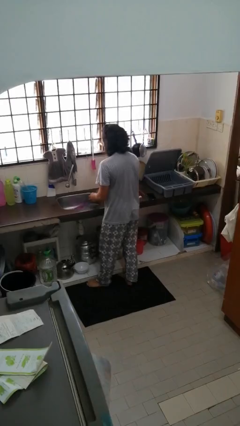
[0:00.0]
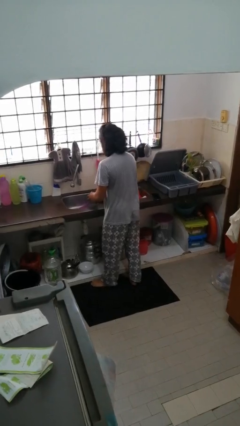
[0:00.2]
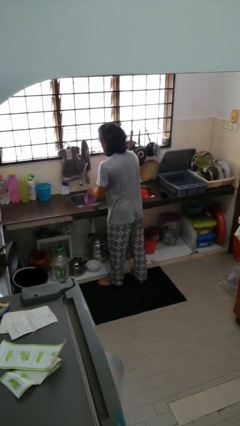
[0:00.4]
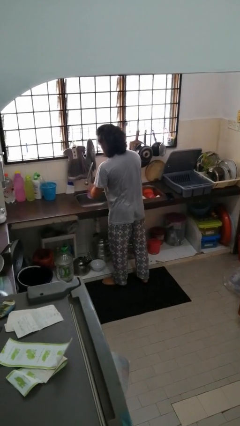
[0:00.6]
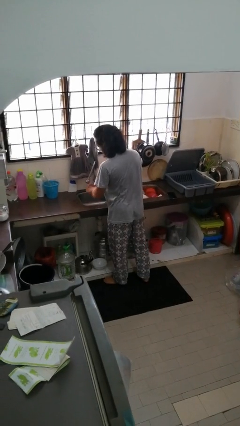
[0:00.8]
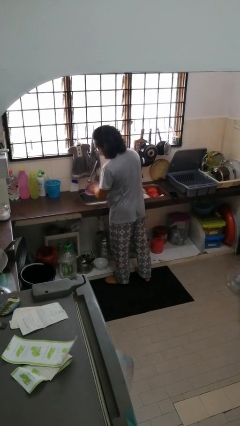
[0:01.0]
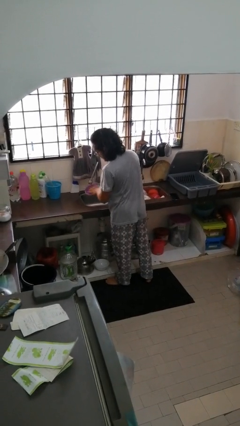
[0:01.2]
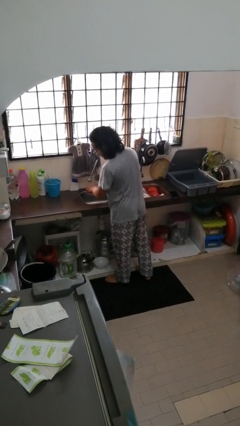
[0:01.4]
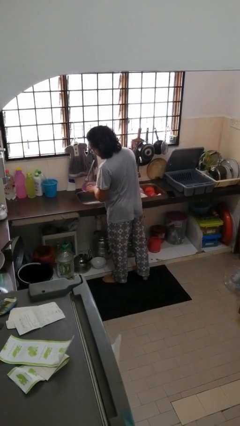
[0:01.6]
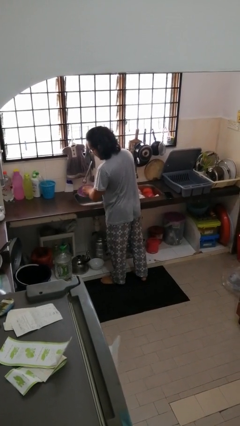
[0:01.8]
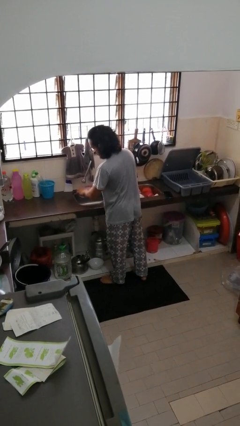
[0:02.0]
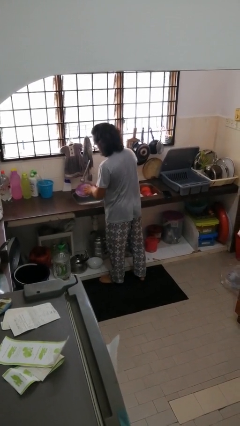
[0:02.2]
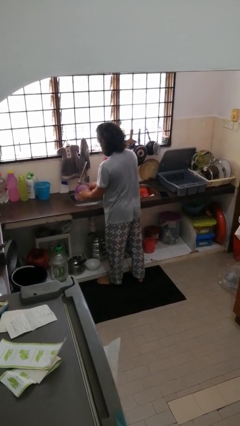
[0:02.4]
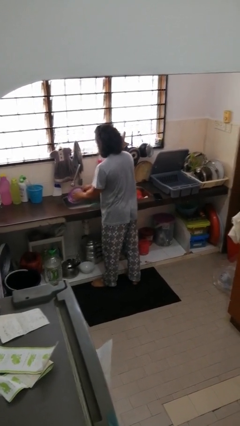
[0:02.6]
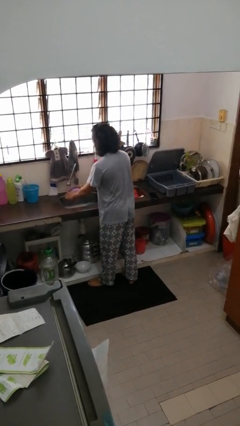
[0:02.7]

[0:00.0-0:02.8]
person washes dish

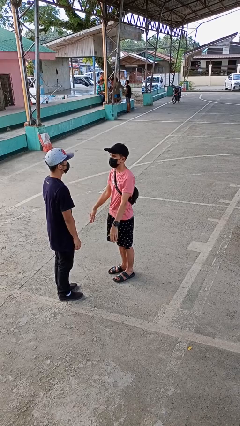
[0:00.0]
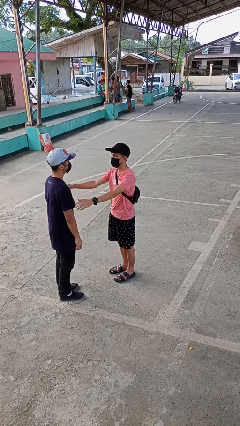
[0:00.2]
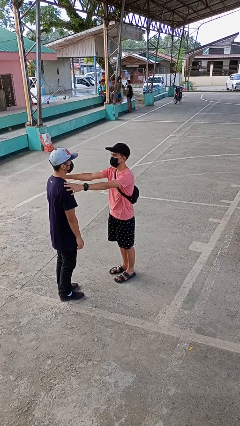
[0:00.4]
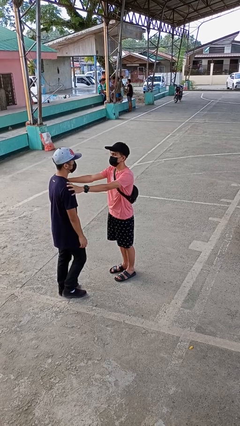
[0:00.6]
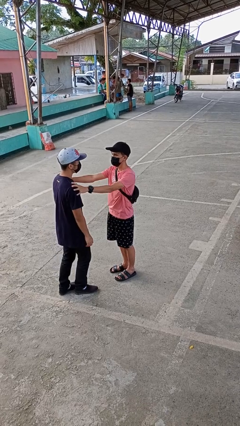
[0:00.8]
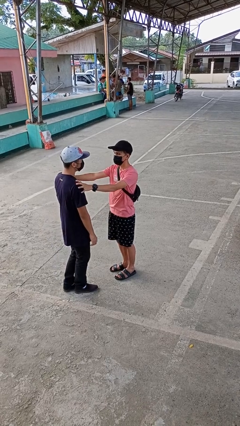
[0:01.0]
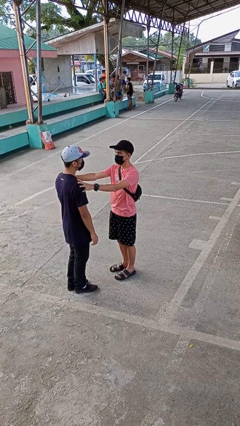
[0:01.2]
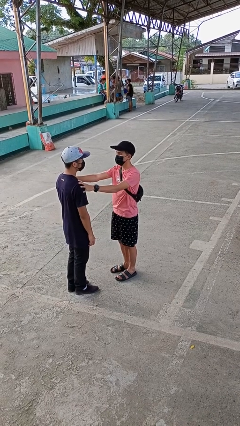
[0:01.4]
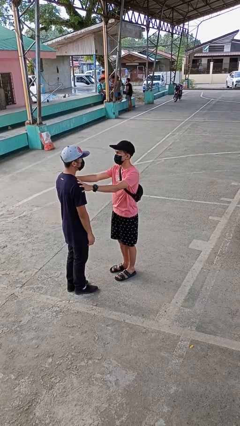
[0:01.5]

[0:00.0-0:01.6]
person grabs person by shoulder

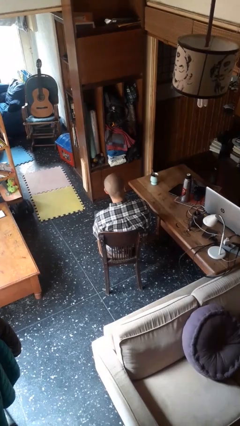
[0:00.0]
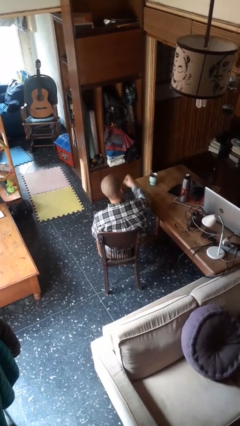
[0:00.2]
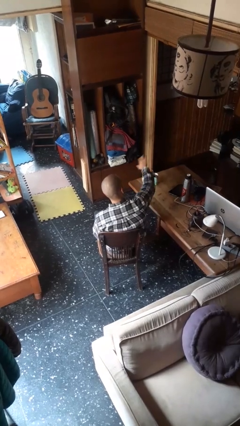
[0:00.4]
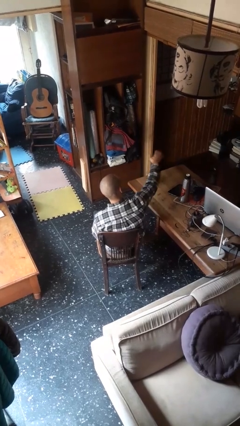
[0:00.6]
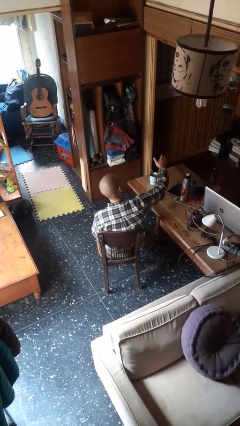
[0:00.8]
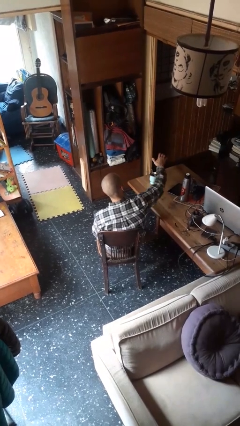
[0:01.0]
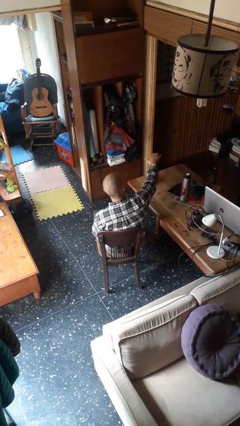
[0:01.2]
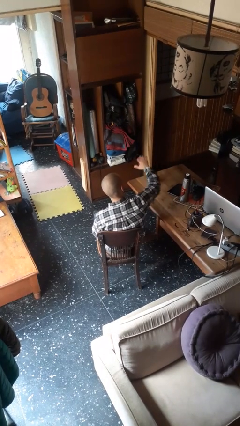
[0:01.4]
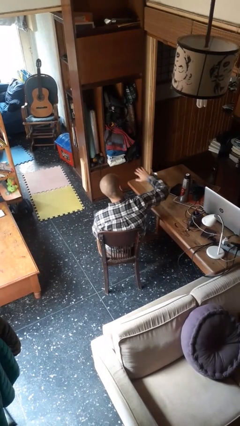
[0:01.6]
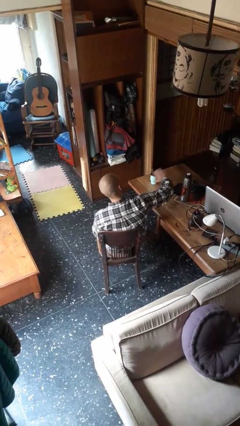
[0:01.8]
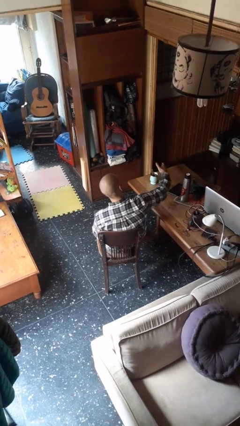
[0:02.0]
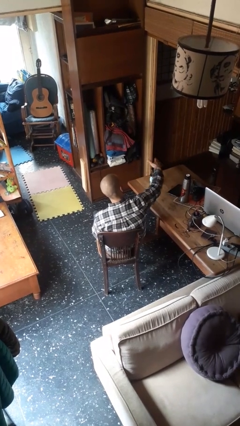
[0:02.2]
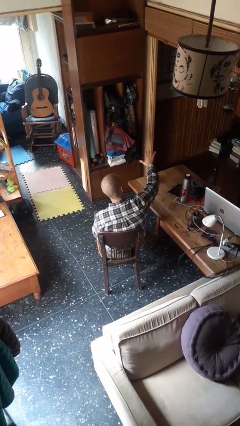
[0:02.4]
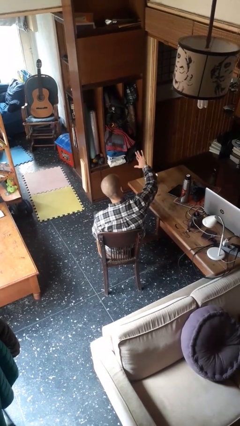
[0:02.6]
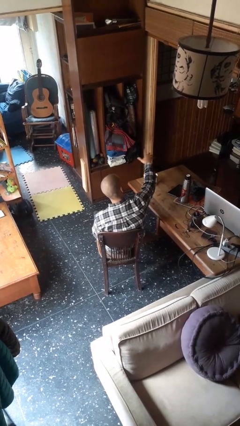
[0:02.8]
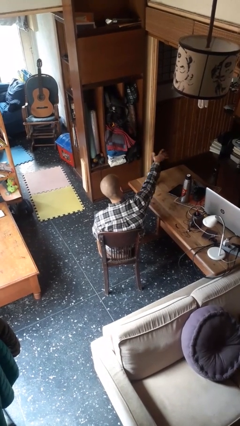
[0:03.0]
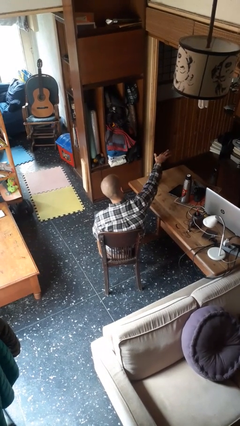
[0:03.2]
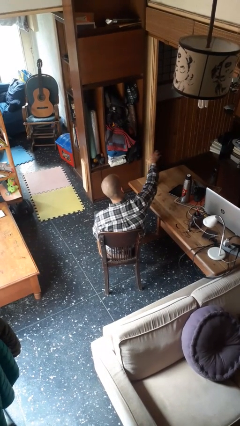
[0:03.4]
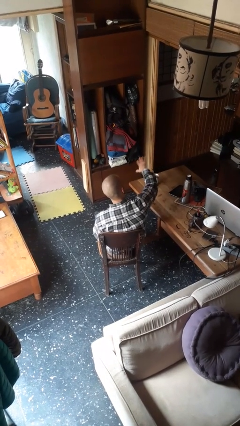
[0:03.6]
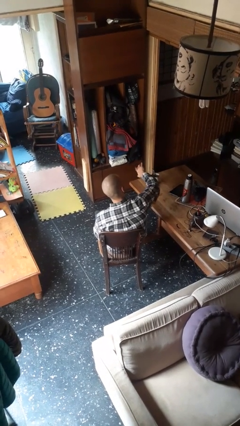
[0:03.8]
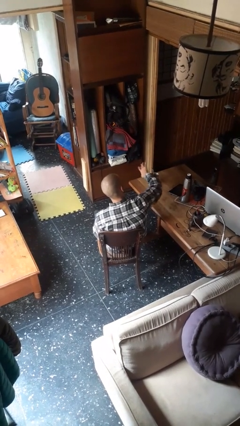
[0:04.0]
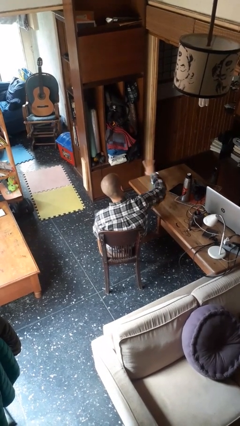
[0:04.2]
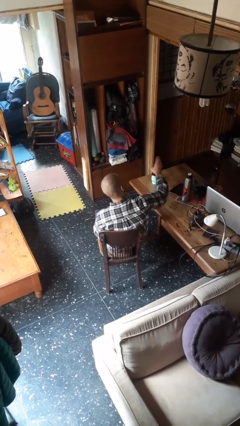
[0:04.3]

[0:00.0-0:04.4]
person waves hand over object

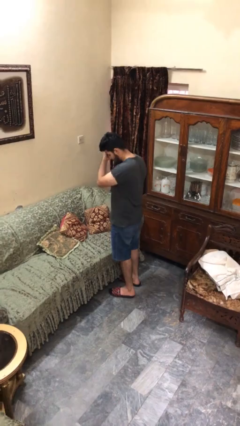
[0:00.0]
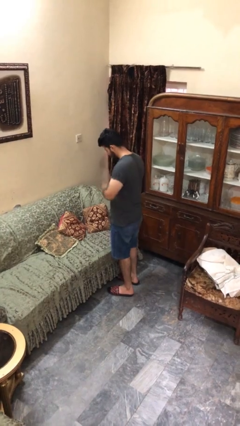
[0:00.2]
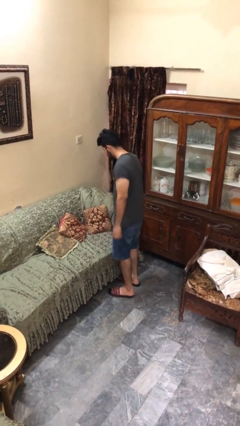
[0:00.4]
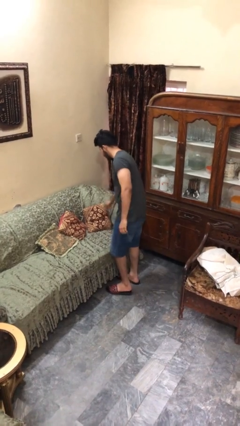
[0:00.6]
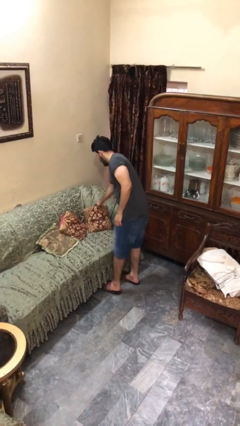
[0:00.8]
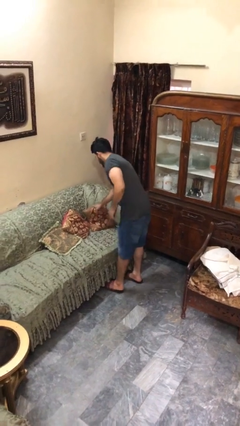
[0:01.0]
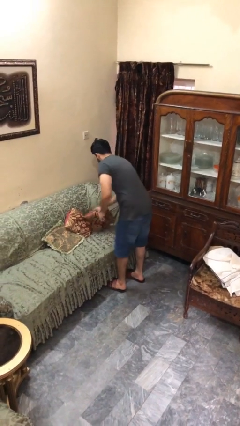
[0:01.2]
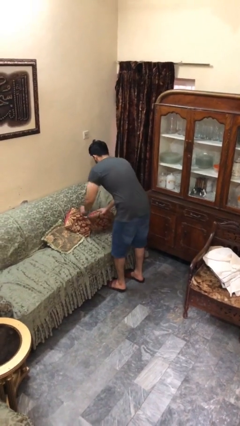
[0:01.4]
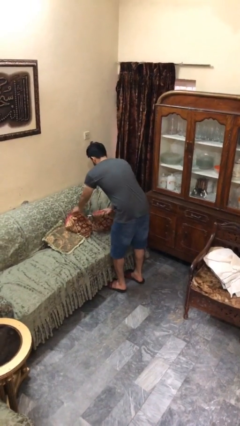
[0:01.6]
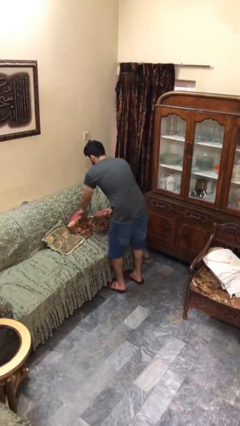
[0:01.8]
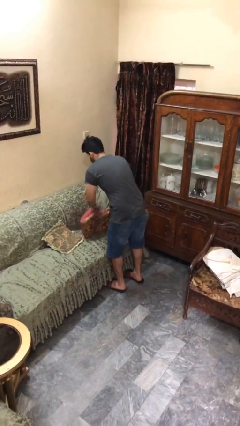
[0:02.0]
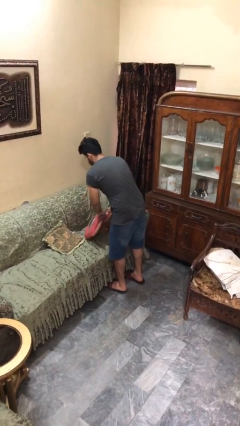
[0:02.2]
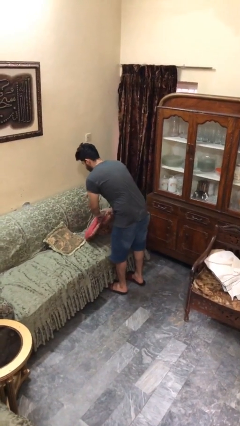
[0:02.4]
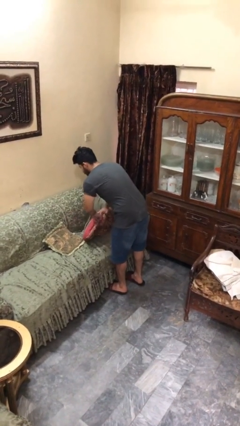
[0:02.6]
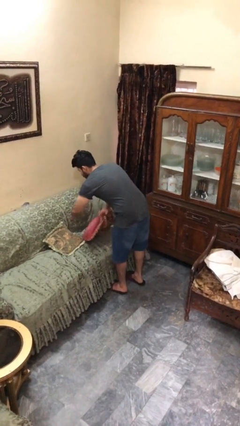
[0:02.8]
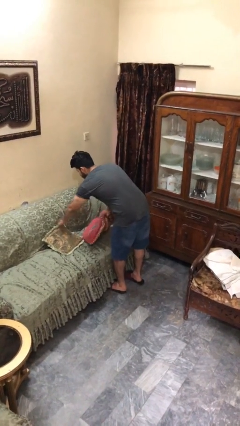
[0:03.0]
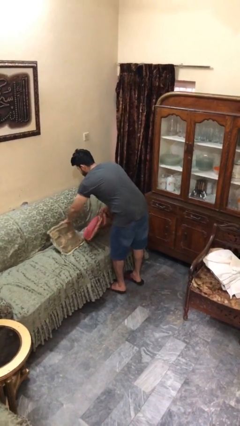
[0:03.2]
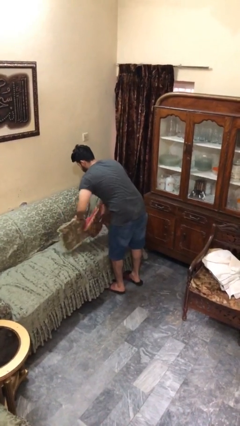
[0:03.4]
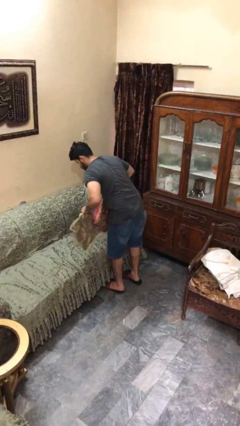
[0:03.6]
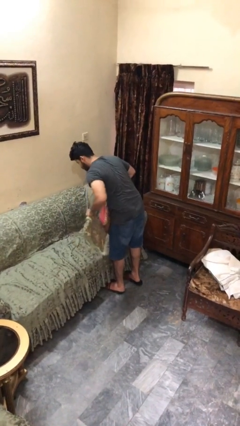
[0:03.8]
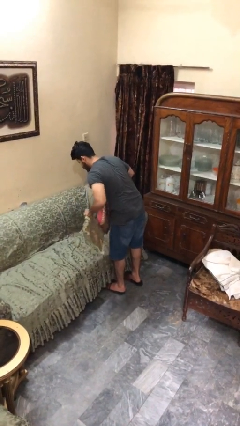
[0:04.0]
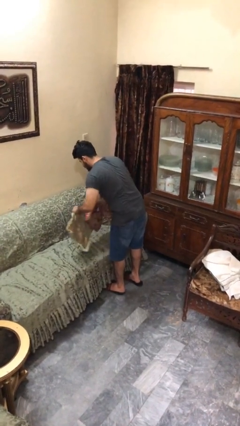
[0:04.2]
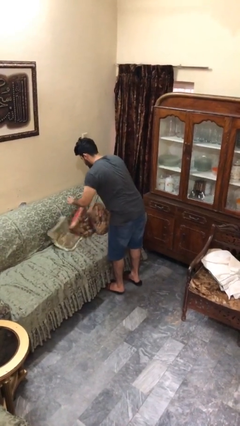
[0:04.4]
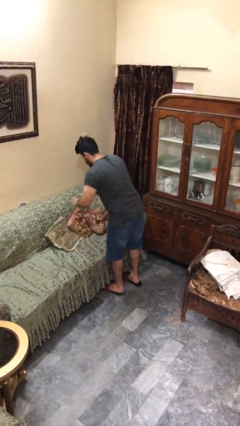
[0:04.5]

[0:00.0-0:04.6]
person searches in couch

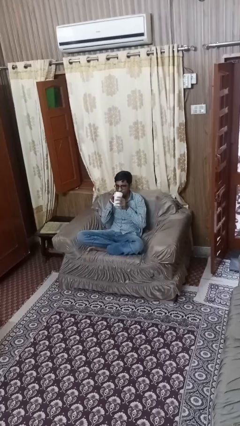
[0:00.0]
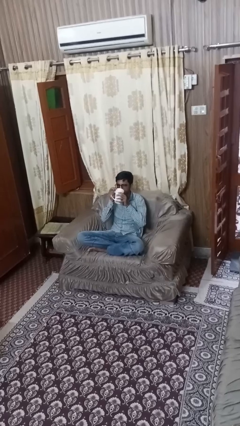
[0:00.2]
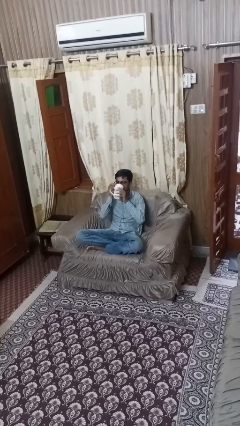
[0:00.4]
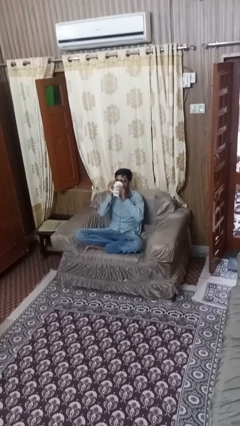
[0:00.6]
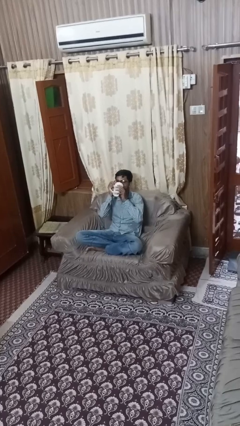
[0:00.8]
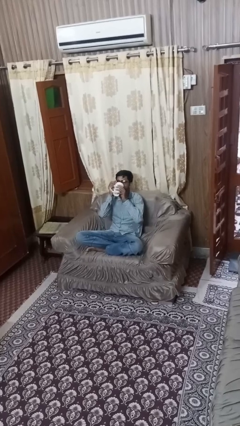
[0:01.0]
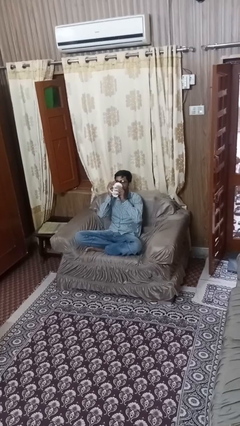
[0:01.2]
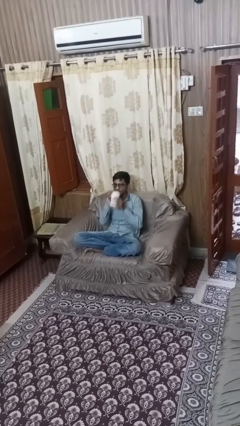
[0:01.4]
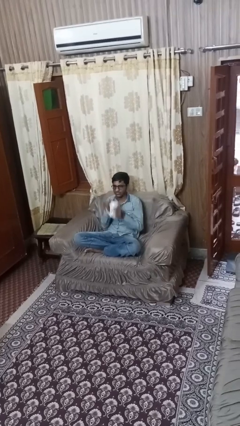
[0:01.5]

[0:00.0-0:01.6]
person drinks from mug

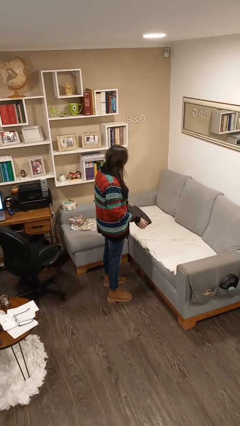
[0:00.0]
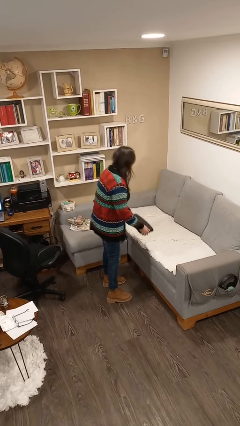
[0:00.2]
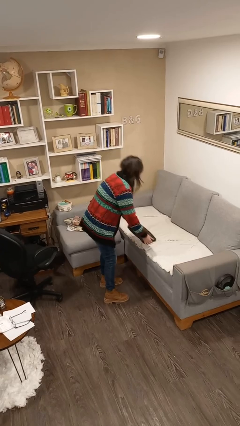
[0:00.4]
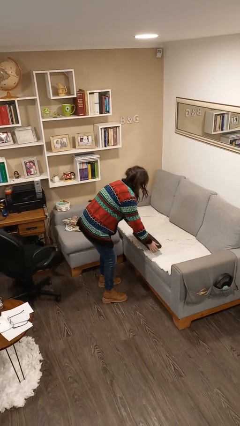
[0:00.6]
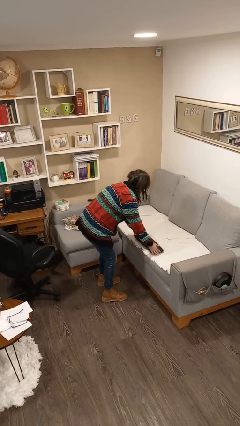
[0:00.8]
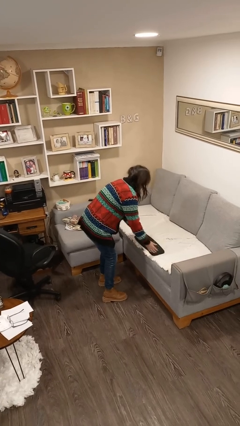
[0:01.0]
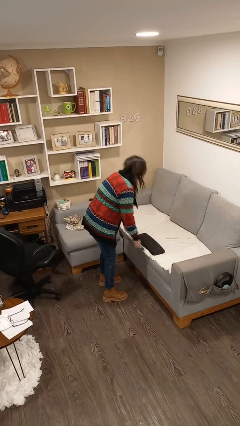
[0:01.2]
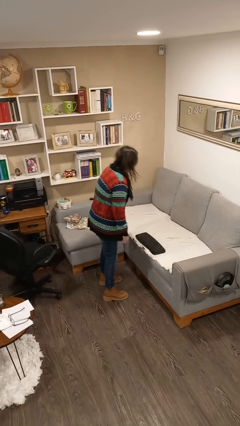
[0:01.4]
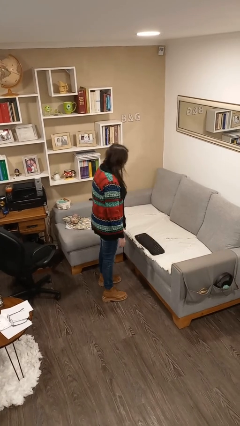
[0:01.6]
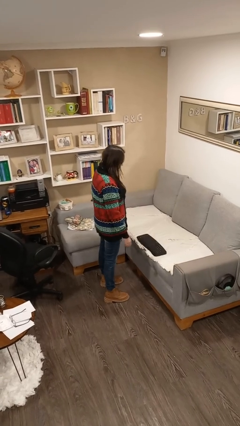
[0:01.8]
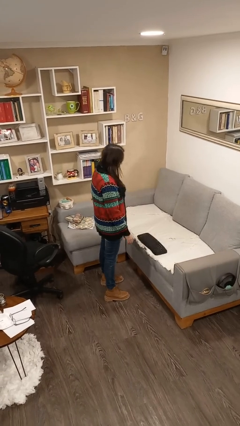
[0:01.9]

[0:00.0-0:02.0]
person puts down object on couch

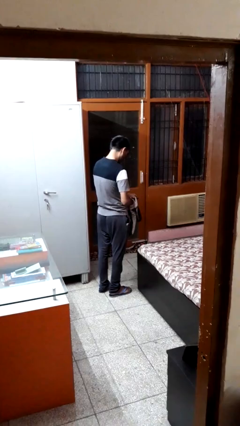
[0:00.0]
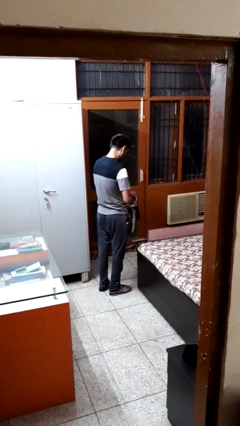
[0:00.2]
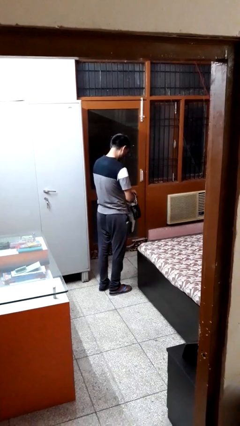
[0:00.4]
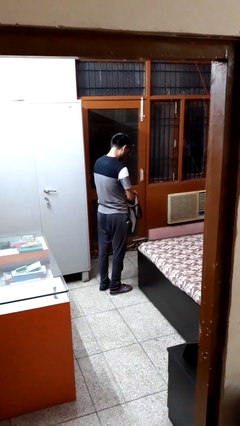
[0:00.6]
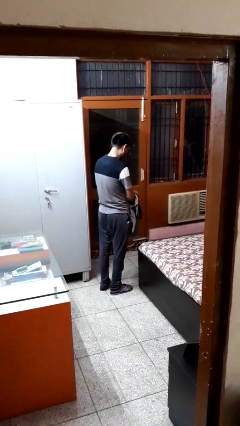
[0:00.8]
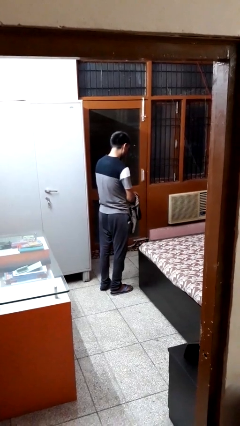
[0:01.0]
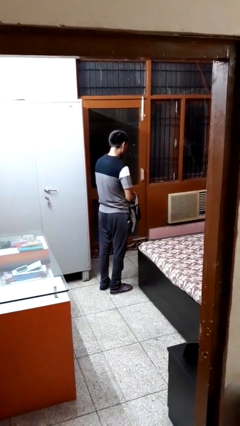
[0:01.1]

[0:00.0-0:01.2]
person puts object into bag
